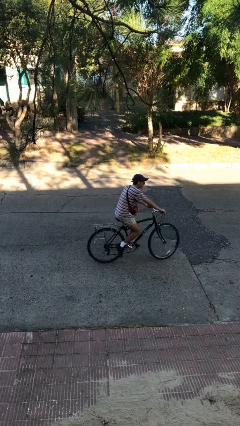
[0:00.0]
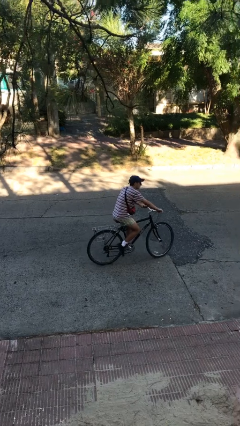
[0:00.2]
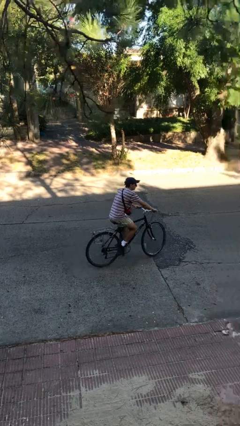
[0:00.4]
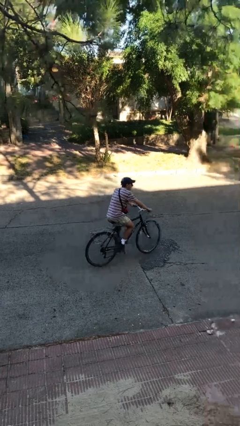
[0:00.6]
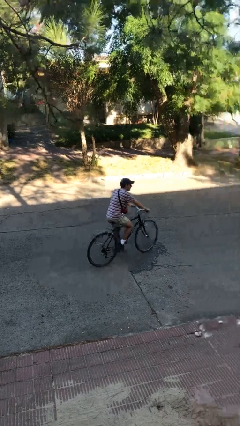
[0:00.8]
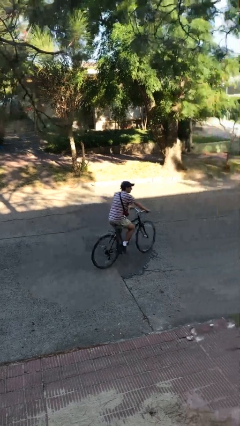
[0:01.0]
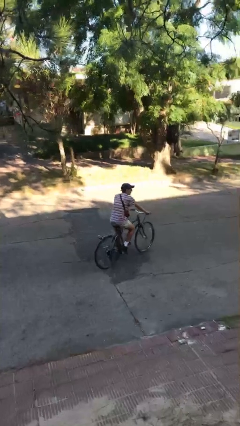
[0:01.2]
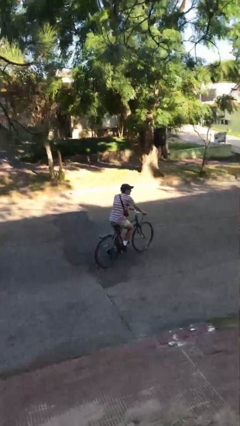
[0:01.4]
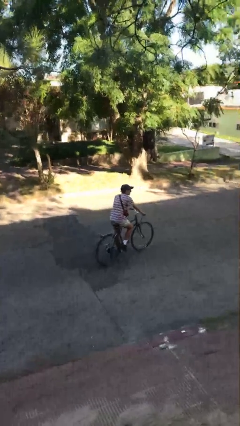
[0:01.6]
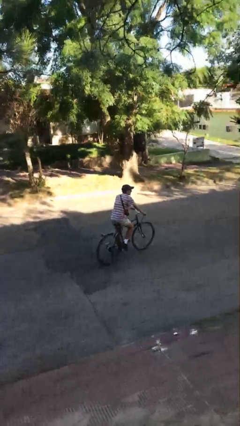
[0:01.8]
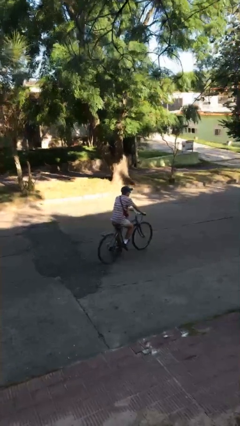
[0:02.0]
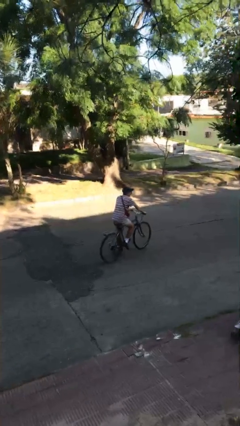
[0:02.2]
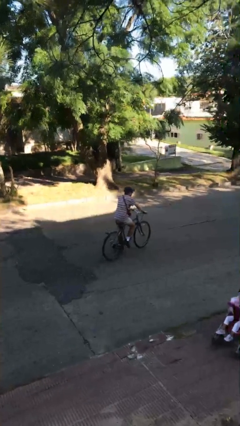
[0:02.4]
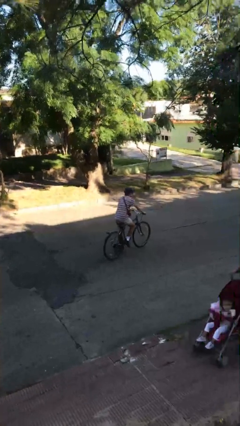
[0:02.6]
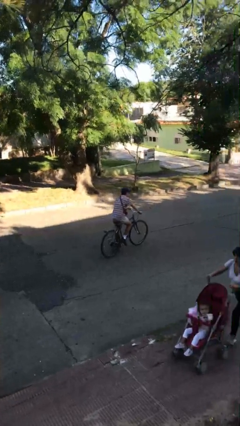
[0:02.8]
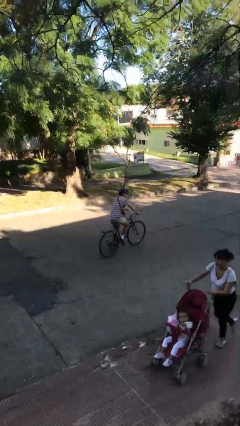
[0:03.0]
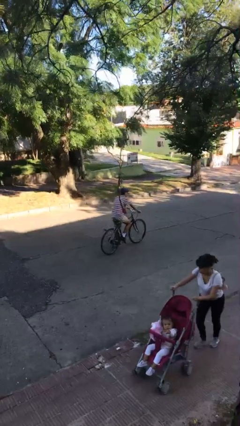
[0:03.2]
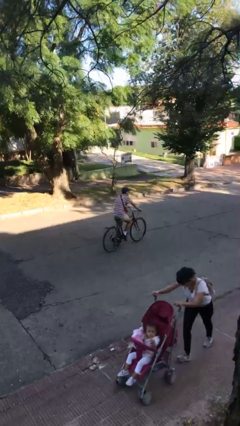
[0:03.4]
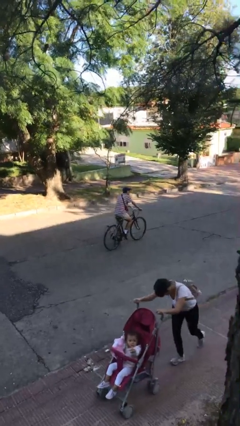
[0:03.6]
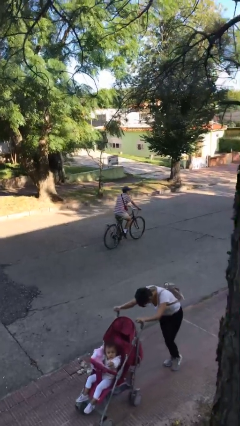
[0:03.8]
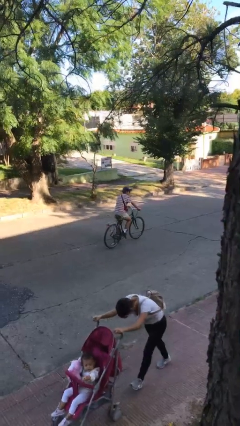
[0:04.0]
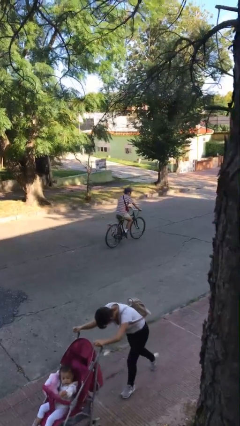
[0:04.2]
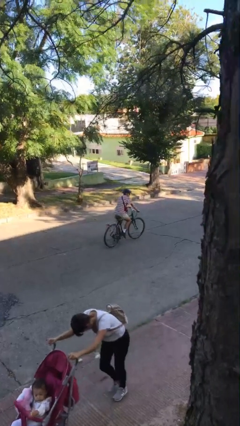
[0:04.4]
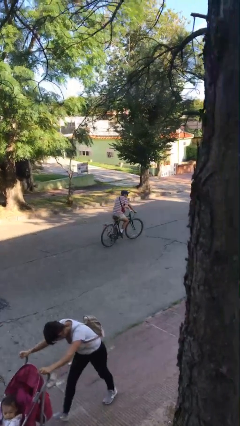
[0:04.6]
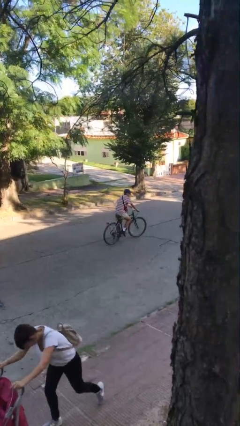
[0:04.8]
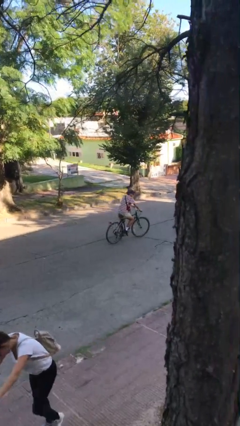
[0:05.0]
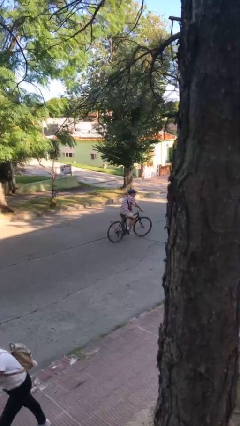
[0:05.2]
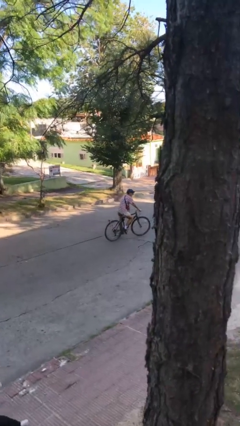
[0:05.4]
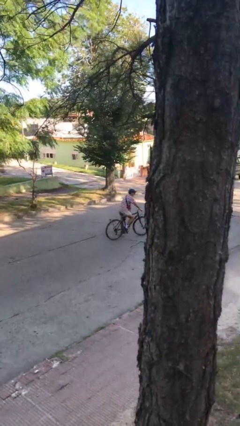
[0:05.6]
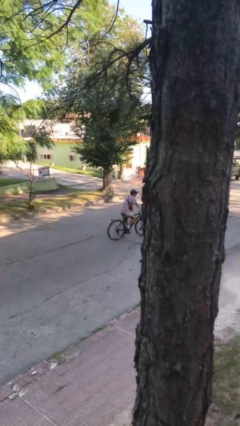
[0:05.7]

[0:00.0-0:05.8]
person rides bicycle

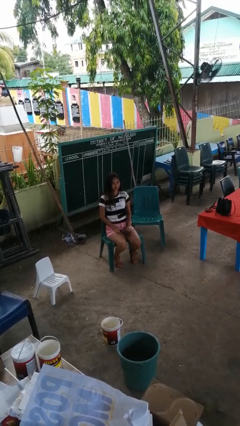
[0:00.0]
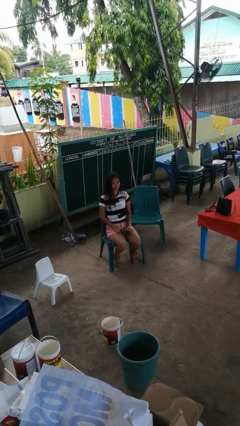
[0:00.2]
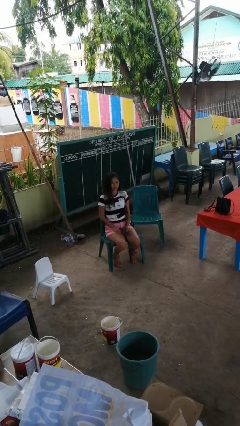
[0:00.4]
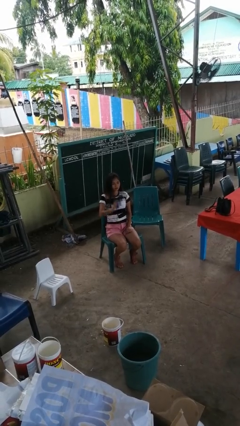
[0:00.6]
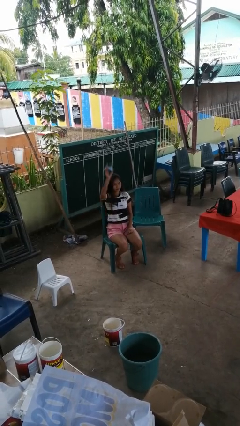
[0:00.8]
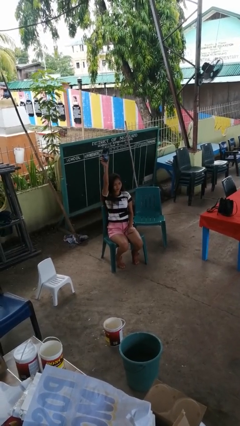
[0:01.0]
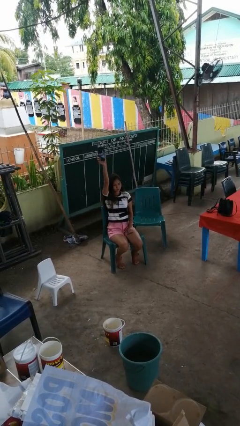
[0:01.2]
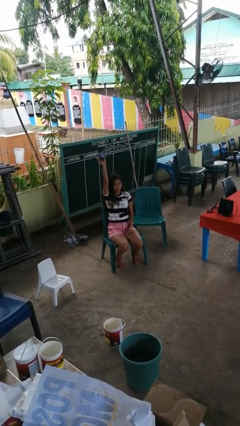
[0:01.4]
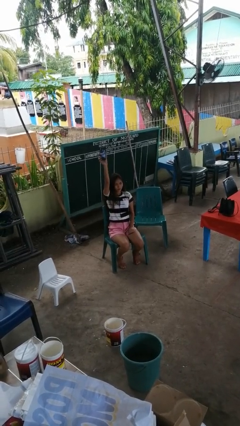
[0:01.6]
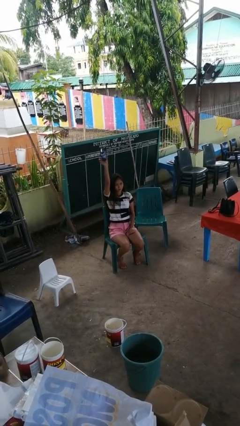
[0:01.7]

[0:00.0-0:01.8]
person holds object above head

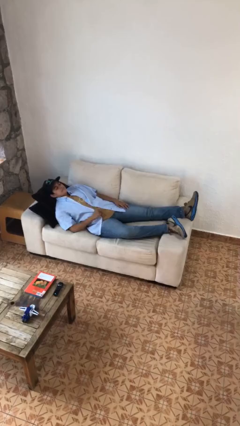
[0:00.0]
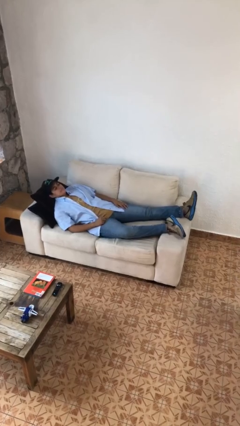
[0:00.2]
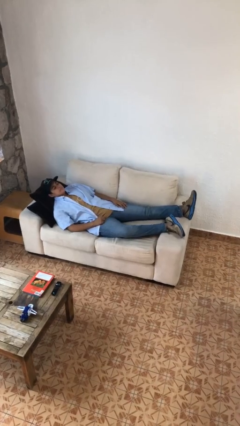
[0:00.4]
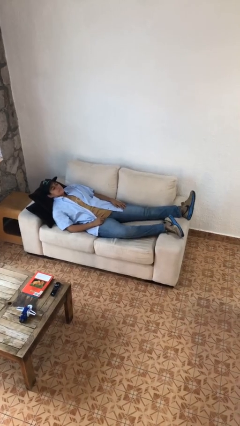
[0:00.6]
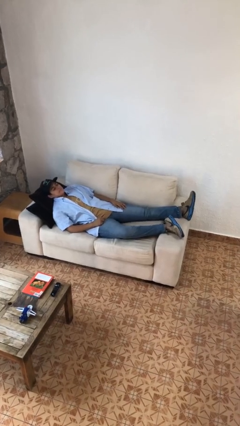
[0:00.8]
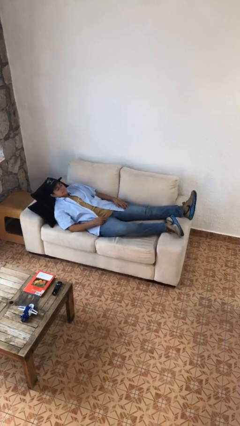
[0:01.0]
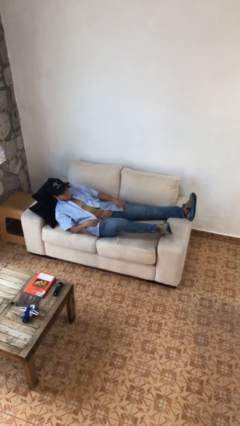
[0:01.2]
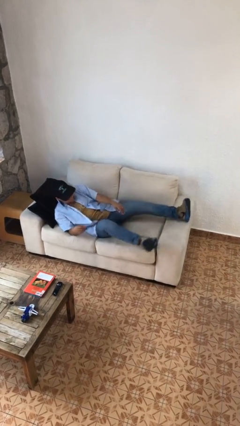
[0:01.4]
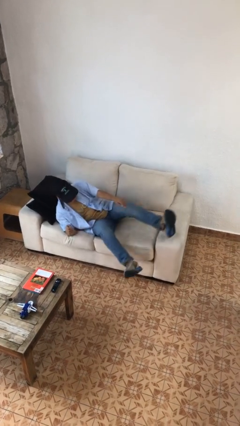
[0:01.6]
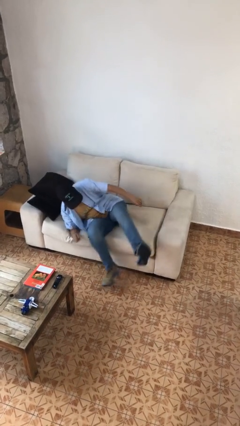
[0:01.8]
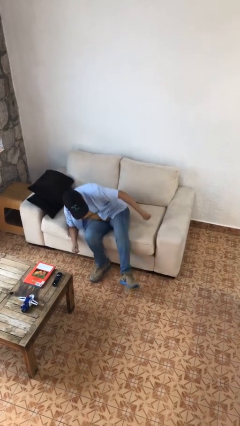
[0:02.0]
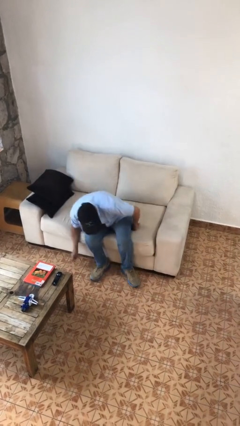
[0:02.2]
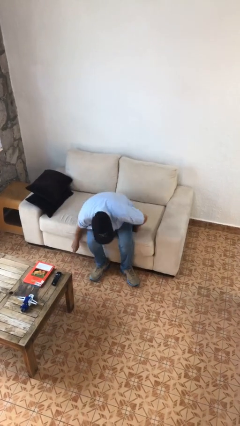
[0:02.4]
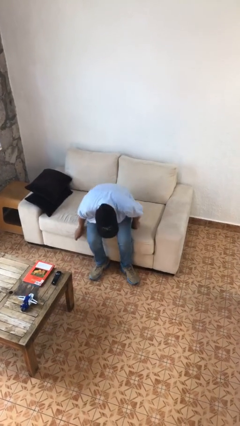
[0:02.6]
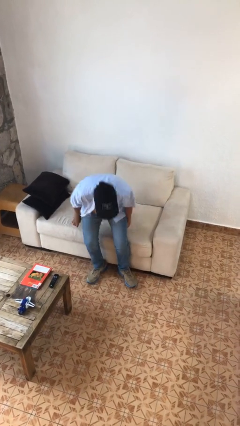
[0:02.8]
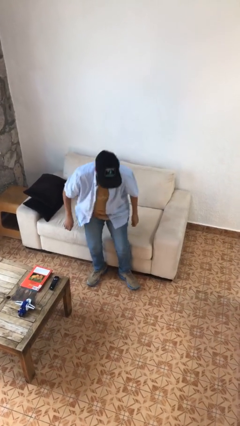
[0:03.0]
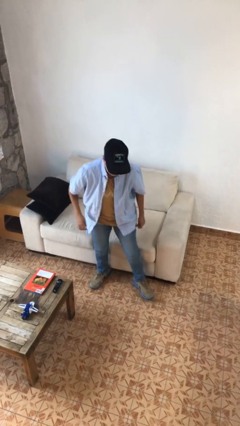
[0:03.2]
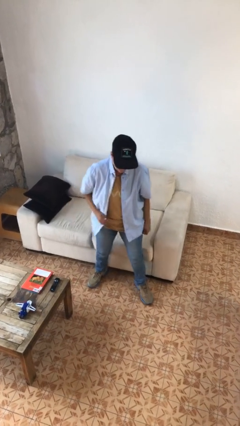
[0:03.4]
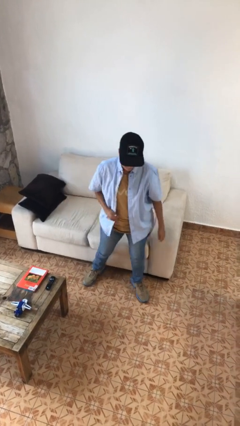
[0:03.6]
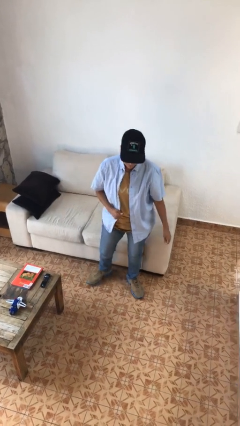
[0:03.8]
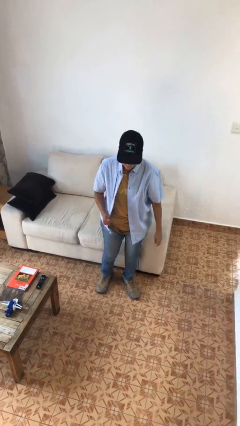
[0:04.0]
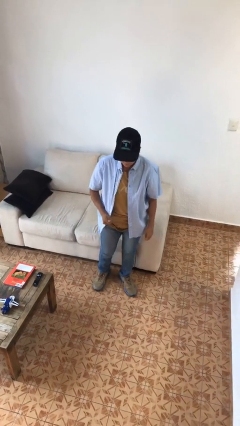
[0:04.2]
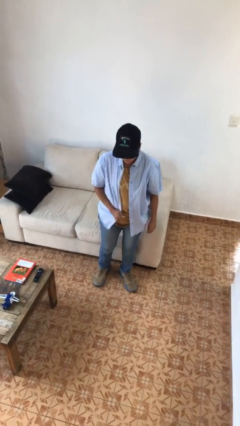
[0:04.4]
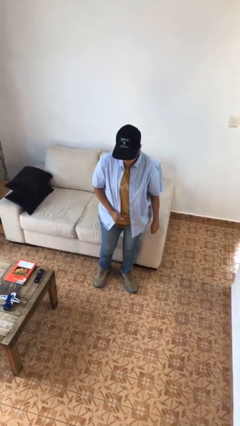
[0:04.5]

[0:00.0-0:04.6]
person stands up

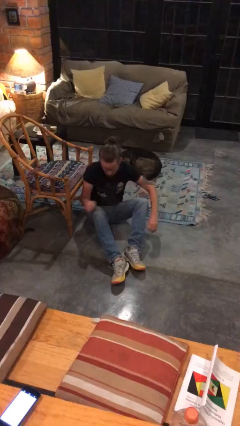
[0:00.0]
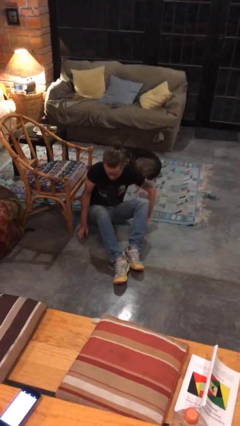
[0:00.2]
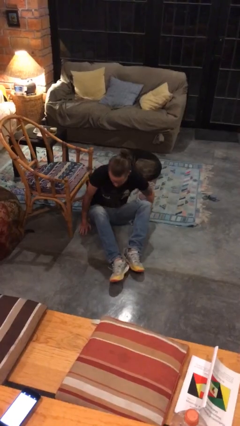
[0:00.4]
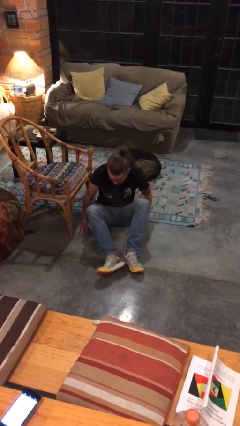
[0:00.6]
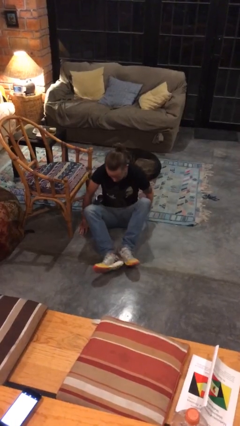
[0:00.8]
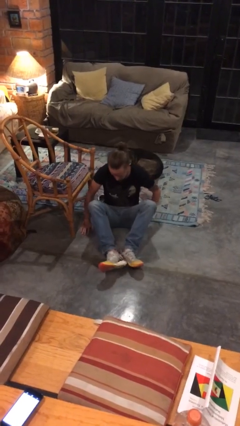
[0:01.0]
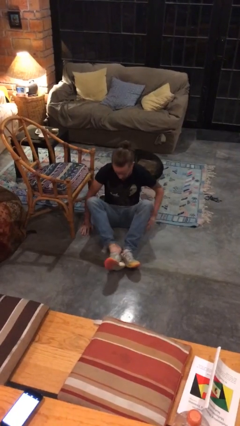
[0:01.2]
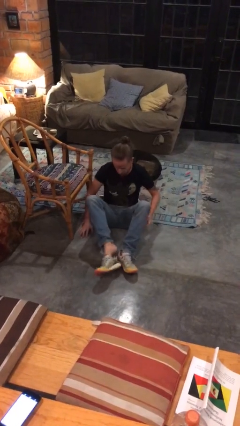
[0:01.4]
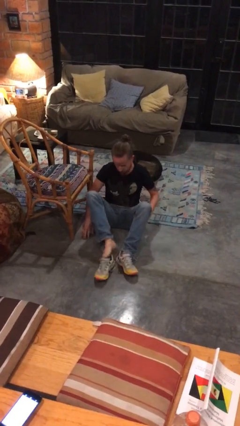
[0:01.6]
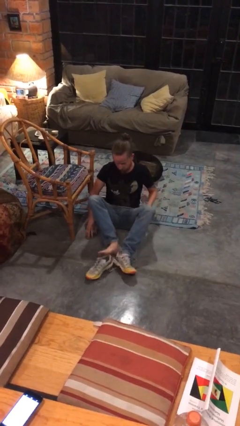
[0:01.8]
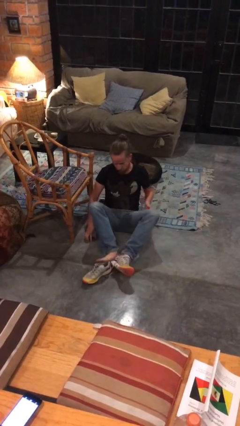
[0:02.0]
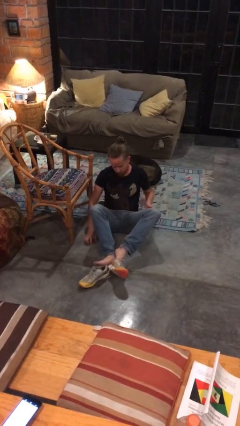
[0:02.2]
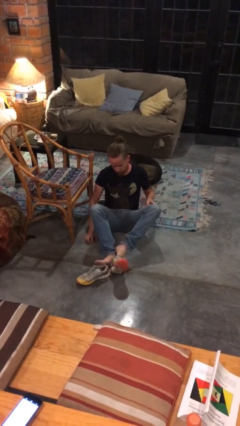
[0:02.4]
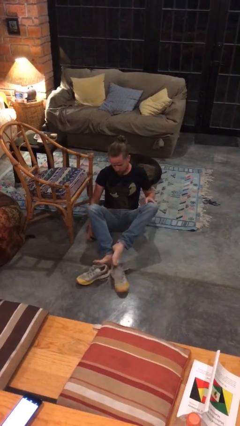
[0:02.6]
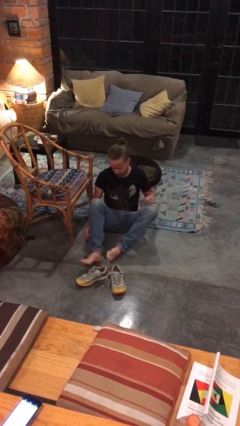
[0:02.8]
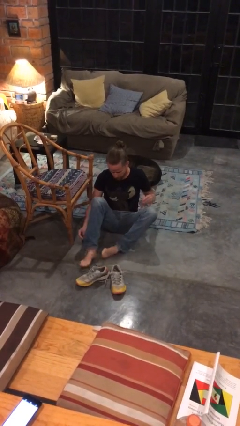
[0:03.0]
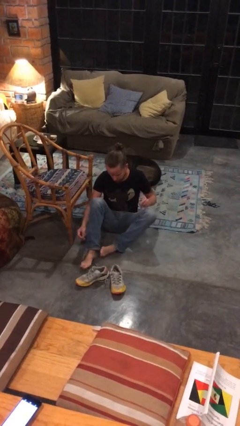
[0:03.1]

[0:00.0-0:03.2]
person takes off shoes

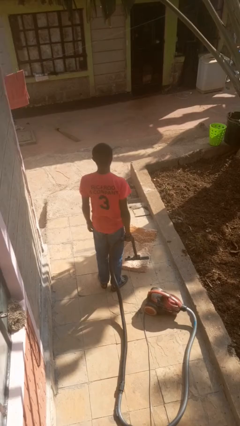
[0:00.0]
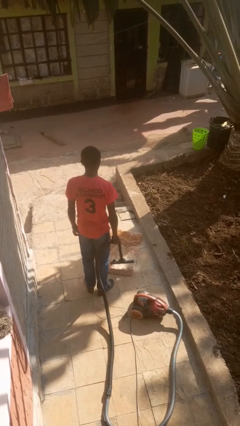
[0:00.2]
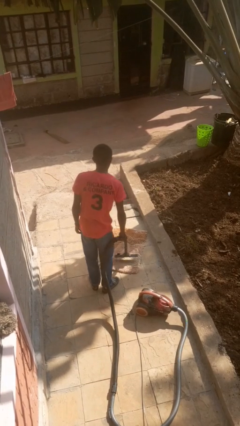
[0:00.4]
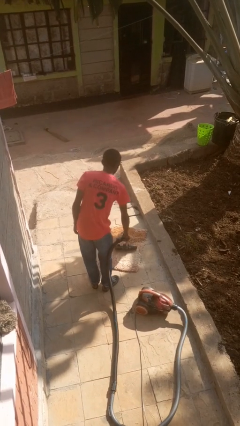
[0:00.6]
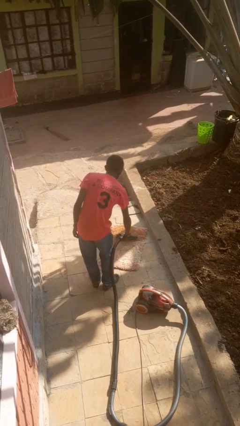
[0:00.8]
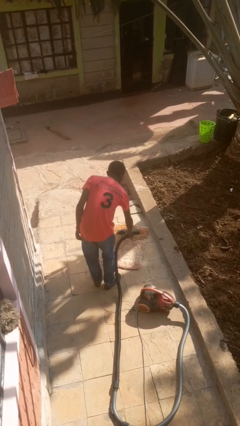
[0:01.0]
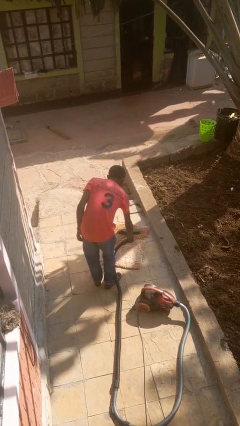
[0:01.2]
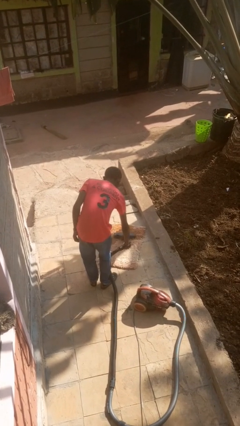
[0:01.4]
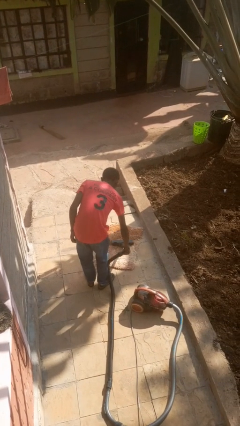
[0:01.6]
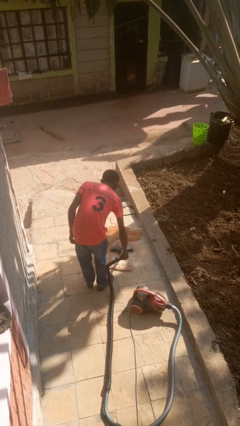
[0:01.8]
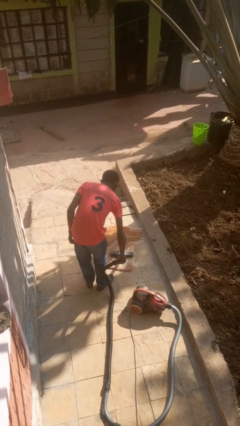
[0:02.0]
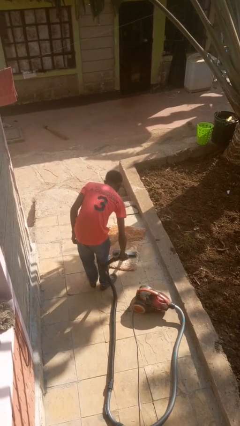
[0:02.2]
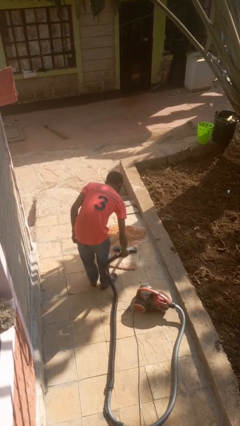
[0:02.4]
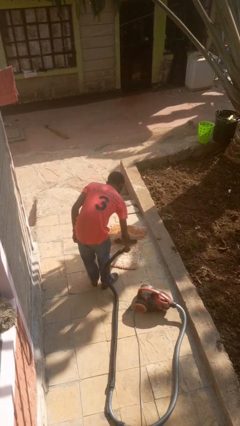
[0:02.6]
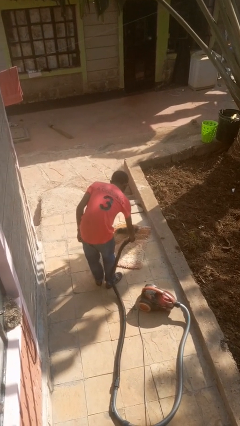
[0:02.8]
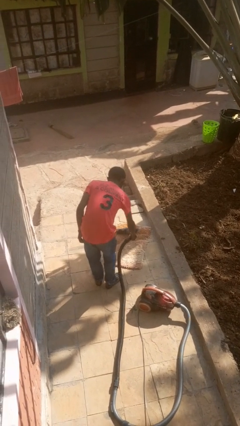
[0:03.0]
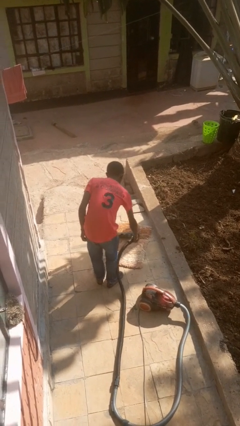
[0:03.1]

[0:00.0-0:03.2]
person vacuums carpet
